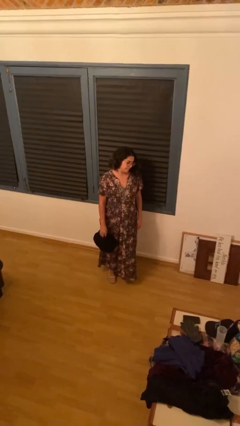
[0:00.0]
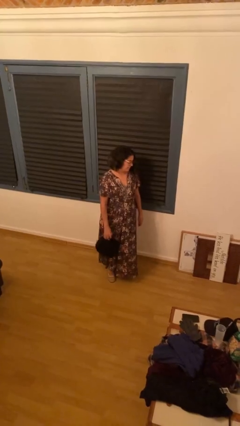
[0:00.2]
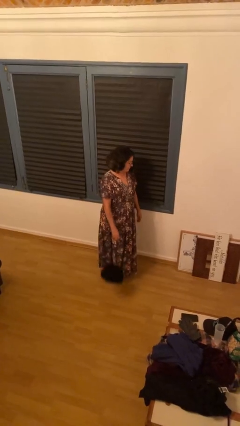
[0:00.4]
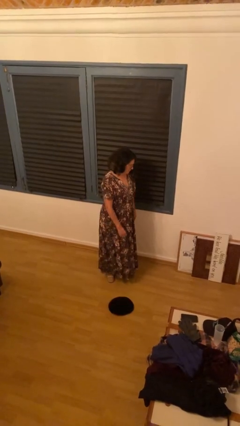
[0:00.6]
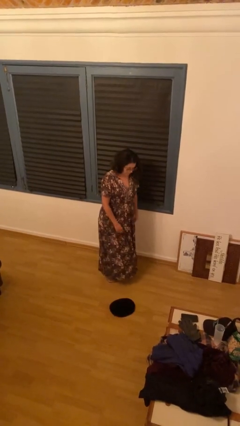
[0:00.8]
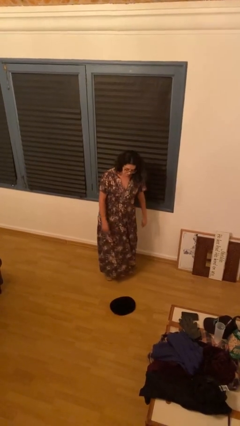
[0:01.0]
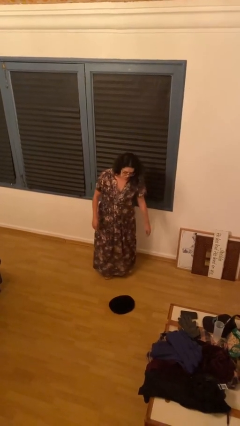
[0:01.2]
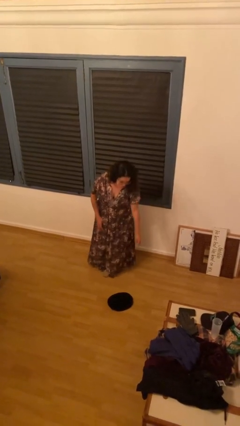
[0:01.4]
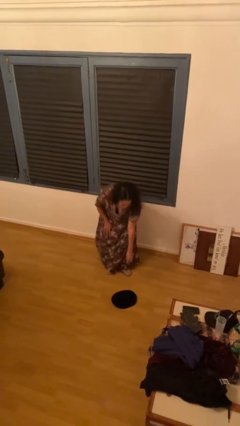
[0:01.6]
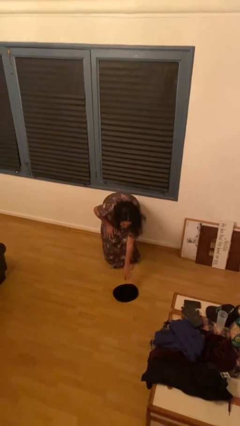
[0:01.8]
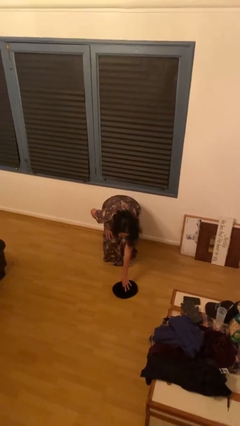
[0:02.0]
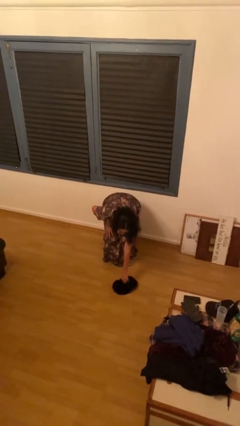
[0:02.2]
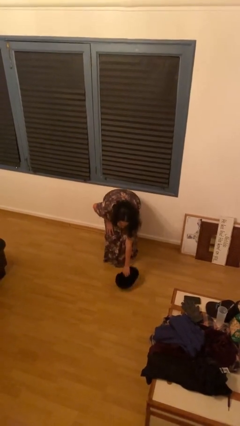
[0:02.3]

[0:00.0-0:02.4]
person drops object

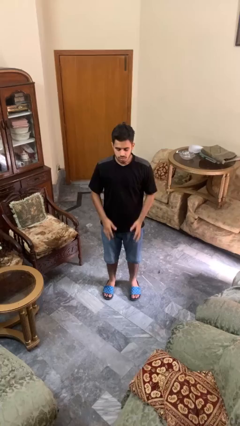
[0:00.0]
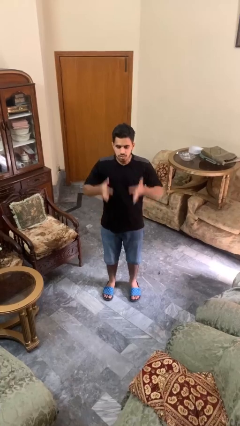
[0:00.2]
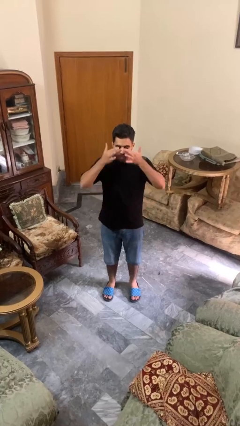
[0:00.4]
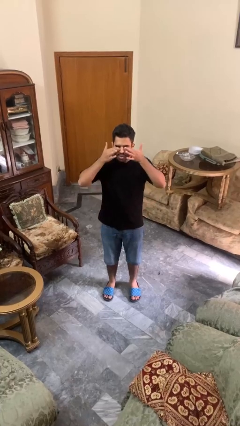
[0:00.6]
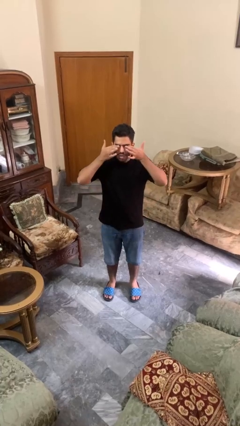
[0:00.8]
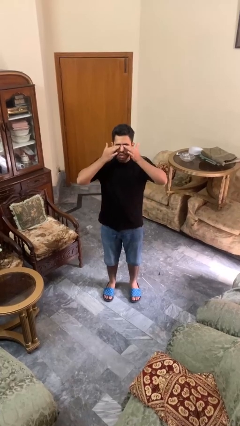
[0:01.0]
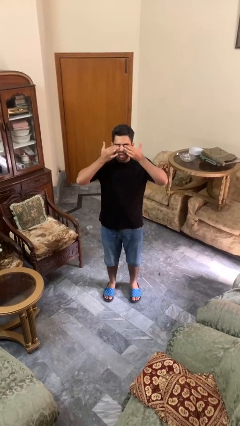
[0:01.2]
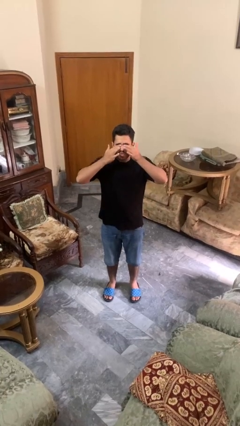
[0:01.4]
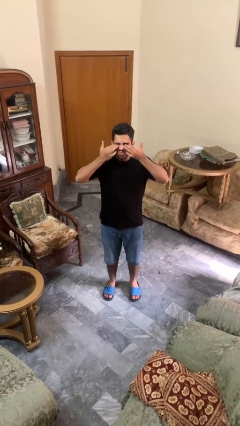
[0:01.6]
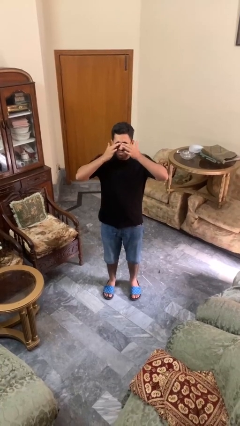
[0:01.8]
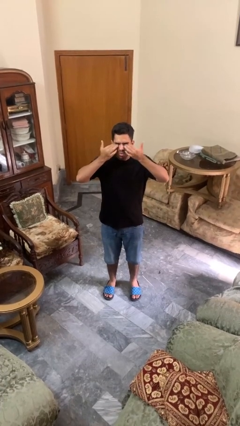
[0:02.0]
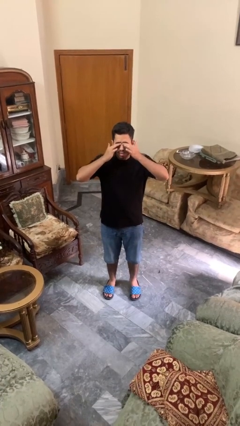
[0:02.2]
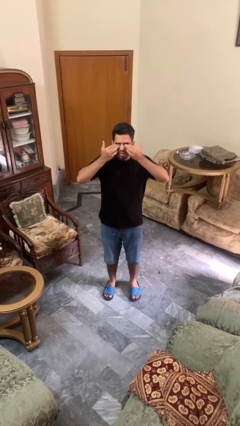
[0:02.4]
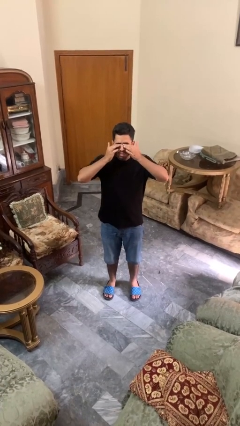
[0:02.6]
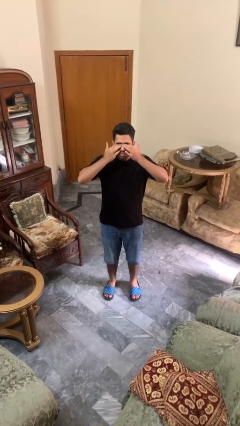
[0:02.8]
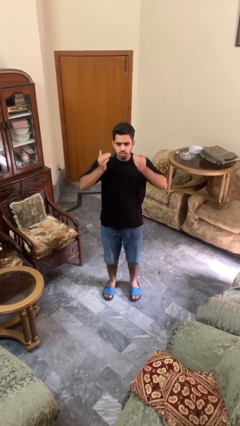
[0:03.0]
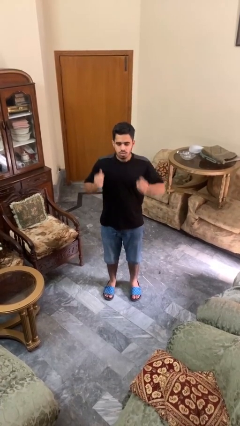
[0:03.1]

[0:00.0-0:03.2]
person rubs eyes

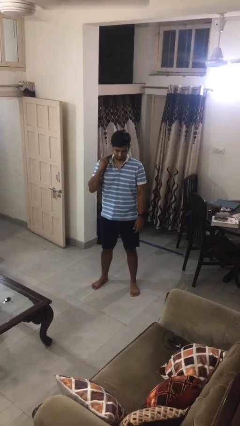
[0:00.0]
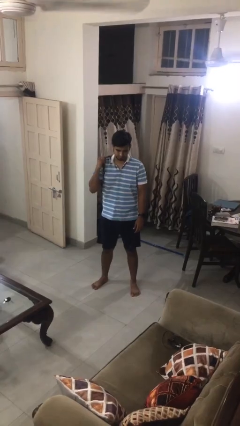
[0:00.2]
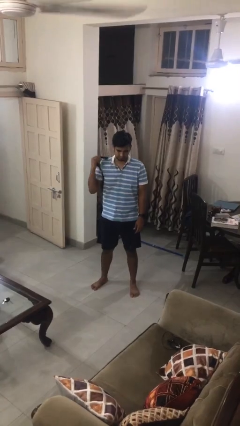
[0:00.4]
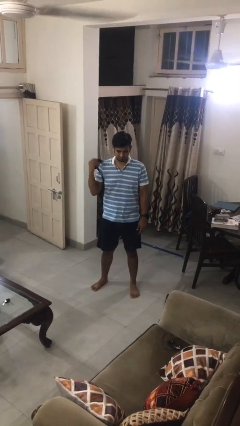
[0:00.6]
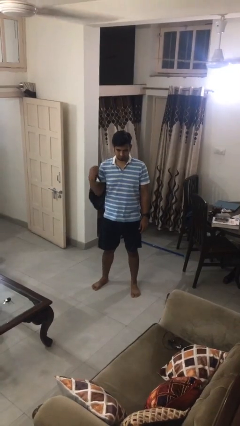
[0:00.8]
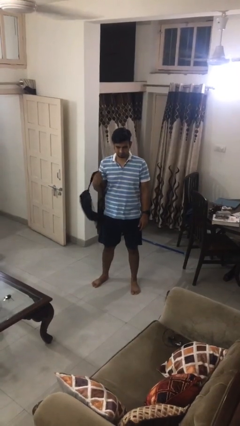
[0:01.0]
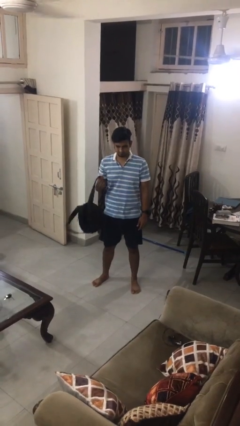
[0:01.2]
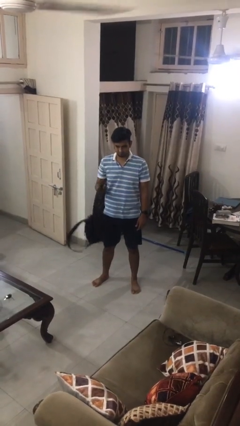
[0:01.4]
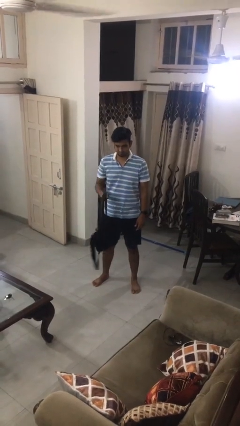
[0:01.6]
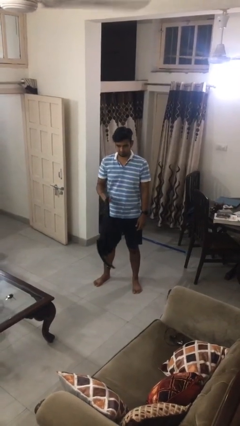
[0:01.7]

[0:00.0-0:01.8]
person takes off backpack

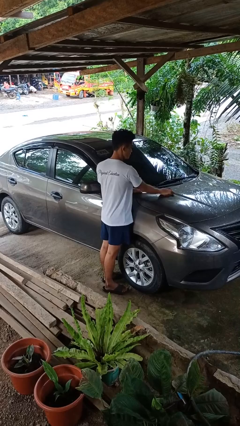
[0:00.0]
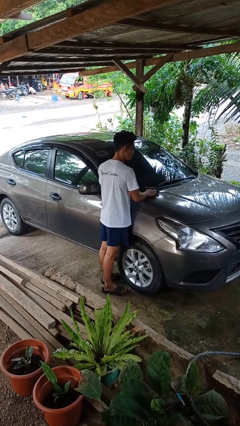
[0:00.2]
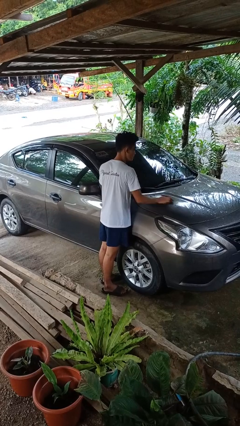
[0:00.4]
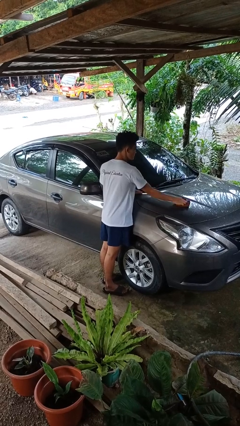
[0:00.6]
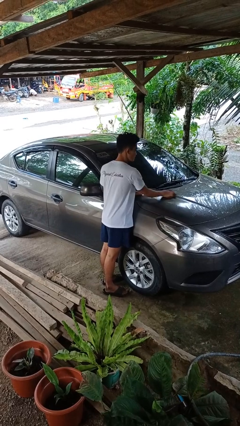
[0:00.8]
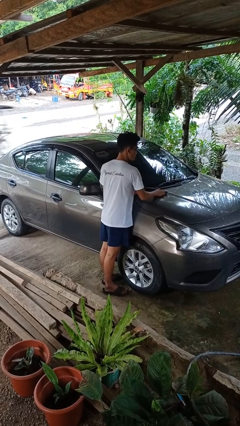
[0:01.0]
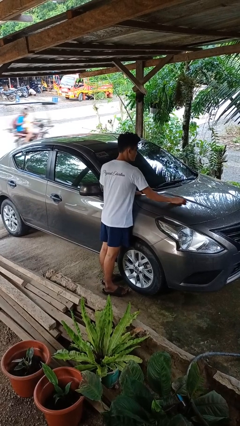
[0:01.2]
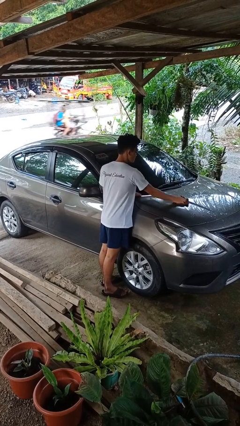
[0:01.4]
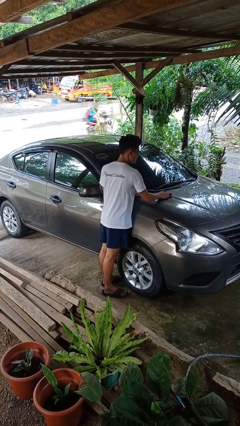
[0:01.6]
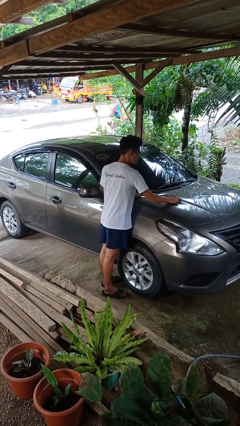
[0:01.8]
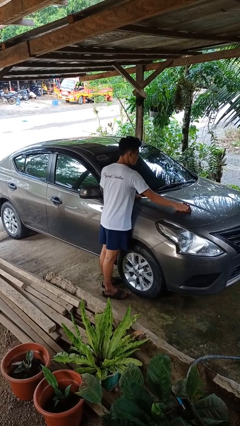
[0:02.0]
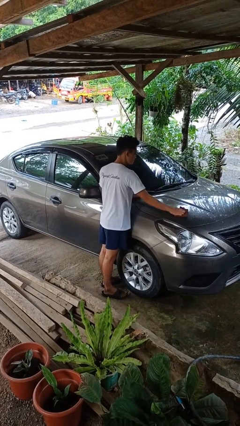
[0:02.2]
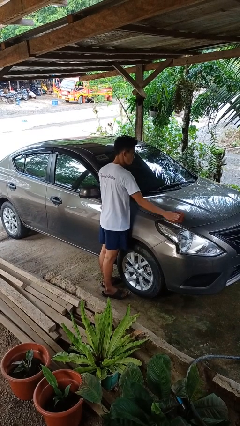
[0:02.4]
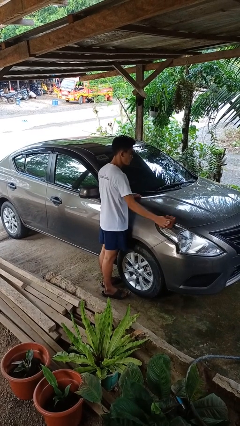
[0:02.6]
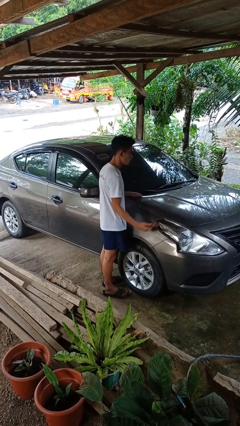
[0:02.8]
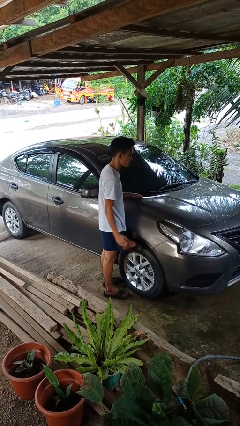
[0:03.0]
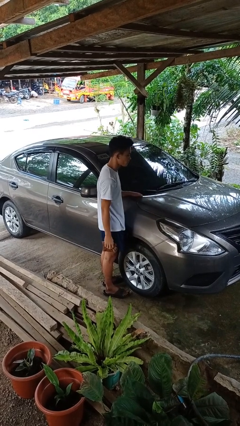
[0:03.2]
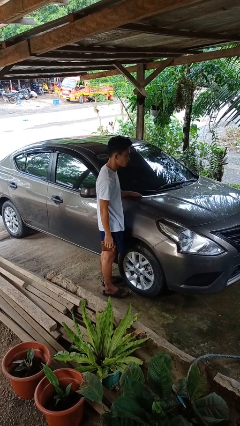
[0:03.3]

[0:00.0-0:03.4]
person polishes car with rag

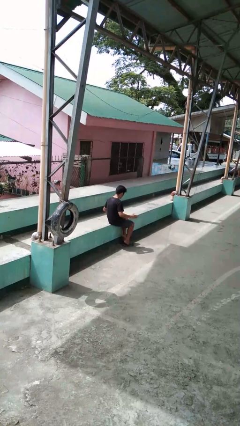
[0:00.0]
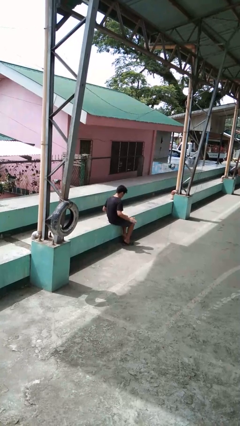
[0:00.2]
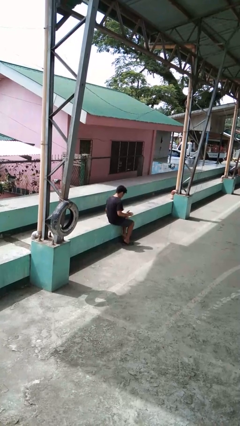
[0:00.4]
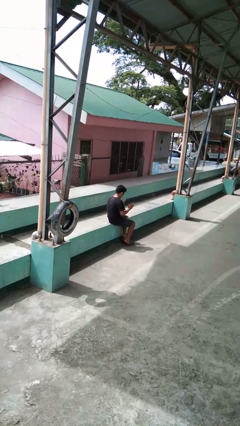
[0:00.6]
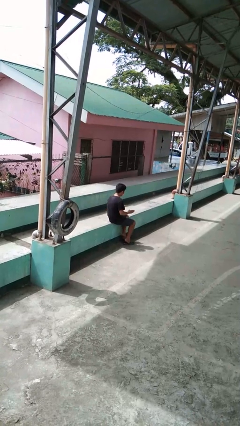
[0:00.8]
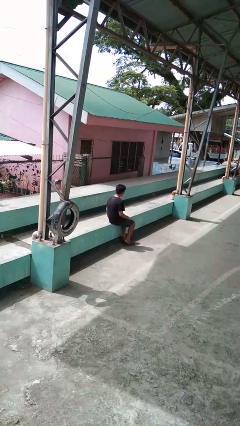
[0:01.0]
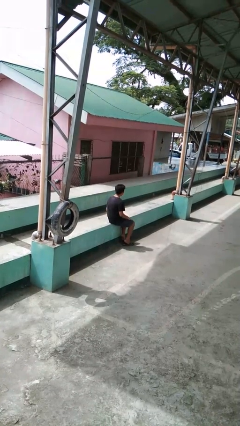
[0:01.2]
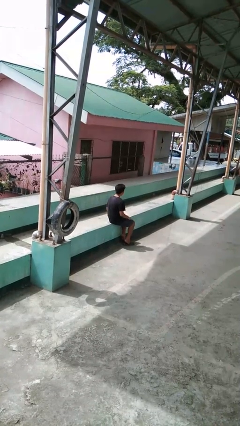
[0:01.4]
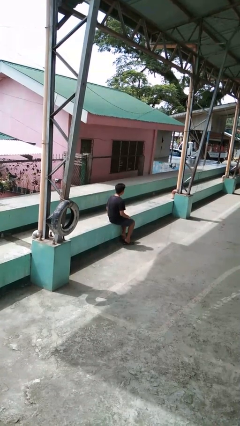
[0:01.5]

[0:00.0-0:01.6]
person slaps hands on thighs

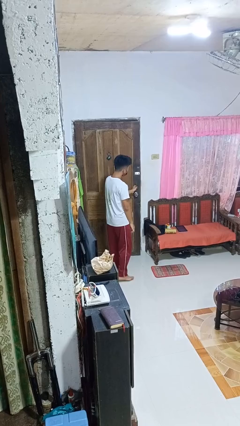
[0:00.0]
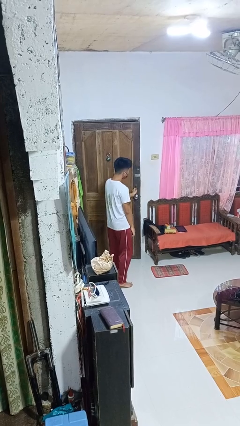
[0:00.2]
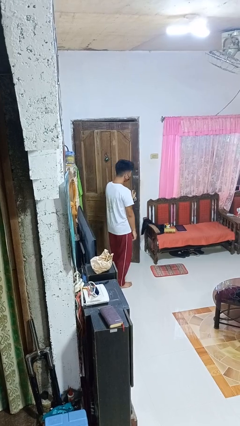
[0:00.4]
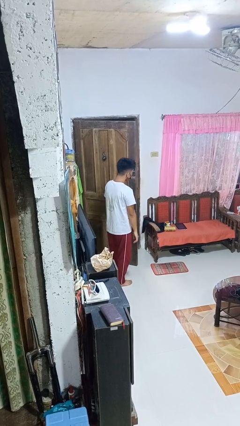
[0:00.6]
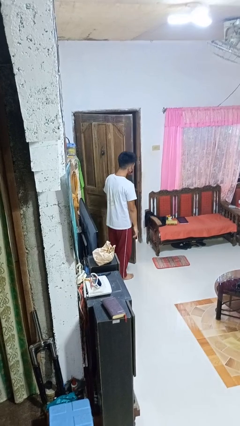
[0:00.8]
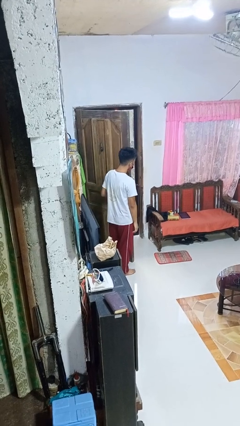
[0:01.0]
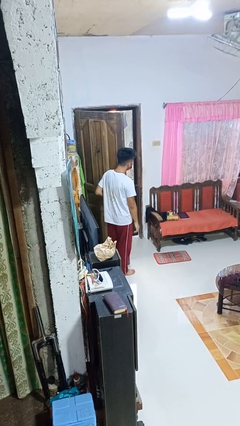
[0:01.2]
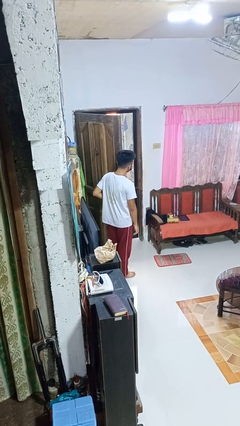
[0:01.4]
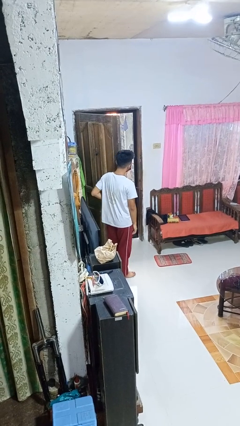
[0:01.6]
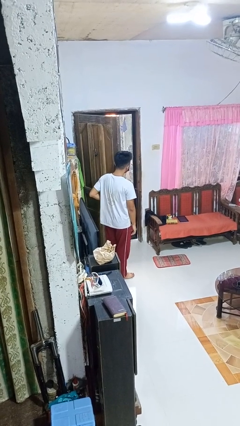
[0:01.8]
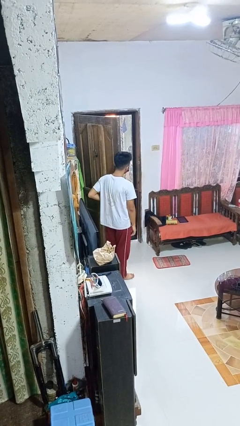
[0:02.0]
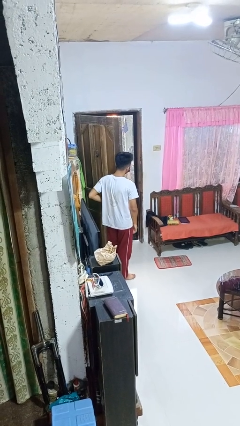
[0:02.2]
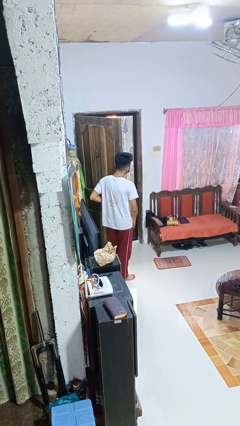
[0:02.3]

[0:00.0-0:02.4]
person opens facility door

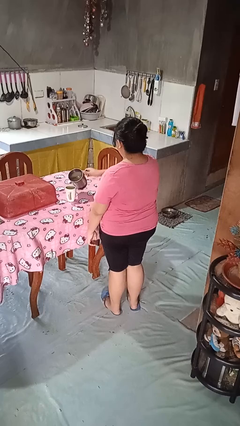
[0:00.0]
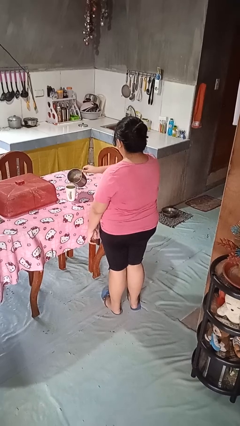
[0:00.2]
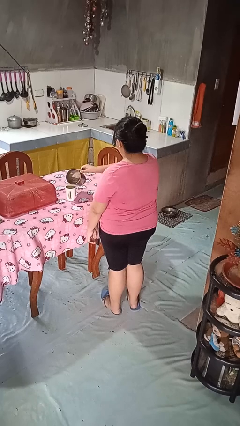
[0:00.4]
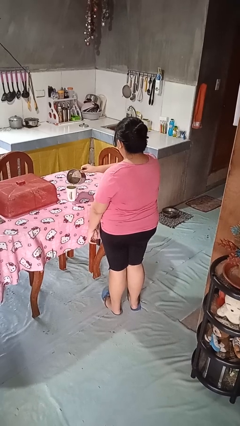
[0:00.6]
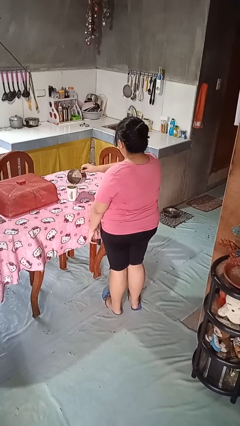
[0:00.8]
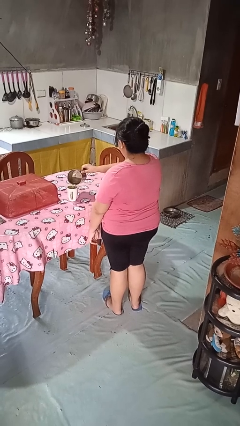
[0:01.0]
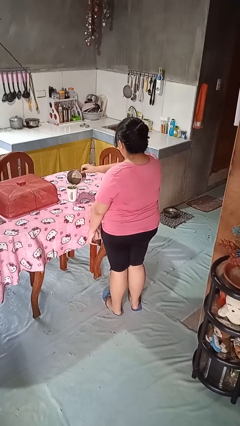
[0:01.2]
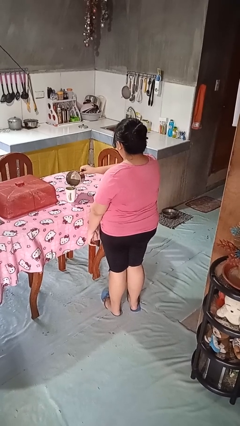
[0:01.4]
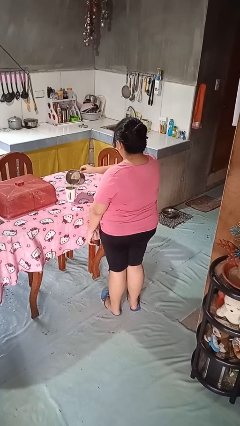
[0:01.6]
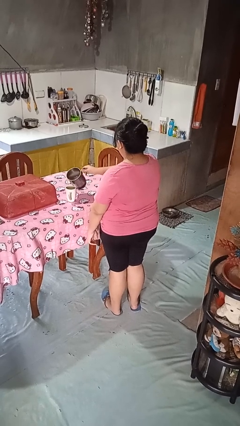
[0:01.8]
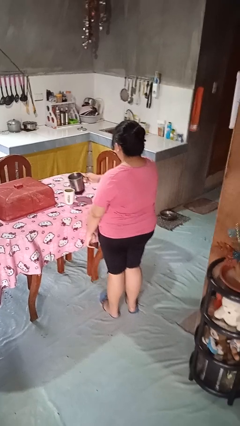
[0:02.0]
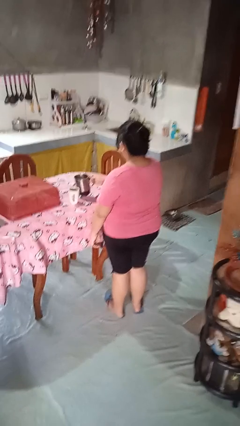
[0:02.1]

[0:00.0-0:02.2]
person pours coffee into mug

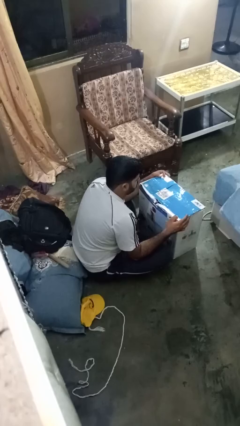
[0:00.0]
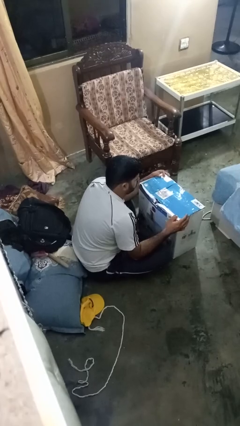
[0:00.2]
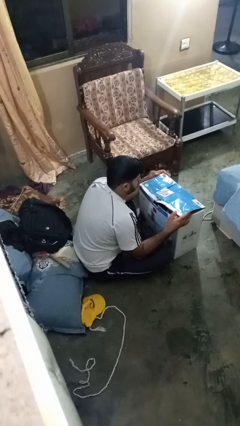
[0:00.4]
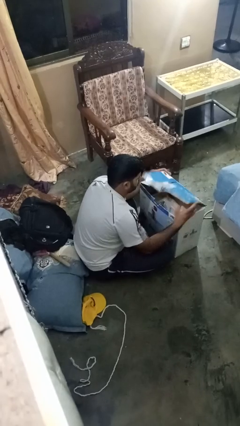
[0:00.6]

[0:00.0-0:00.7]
person opens box
